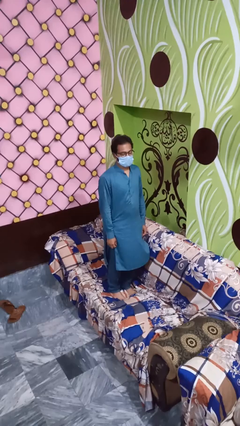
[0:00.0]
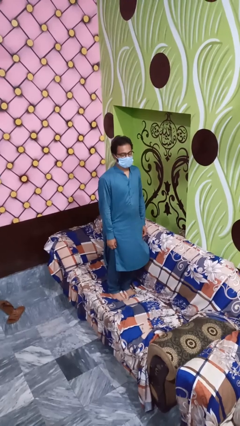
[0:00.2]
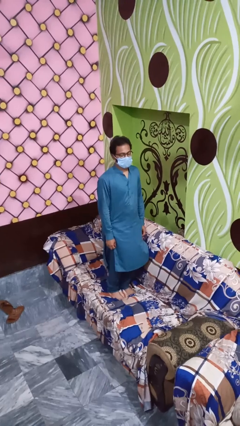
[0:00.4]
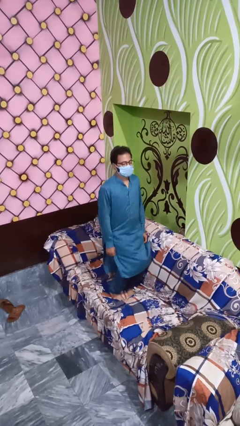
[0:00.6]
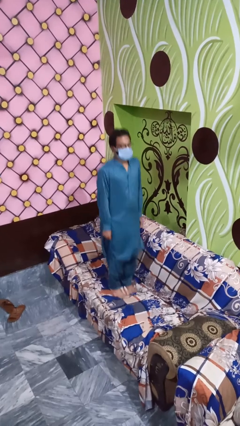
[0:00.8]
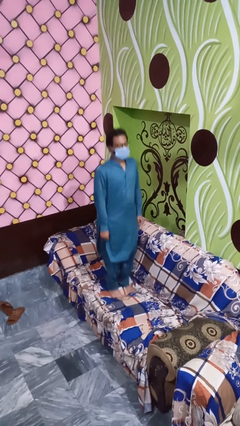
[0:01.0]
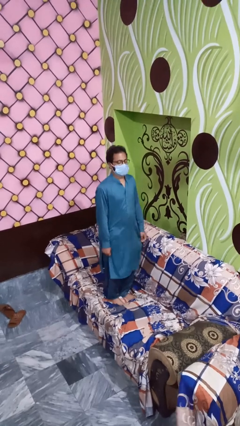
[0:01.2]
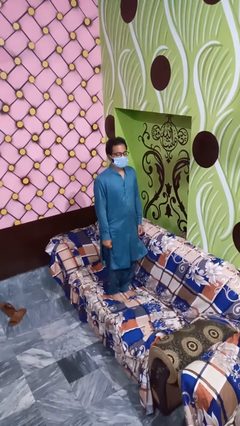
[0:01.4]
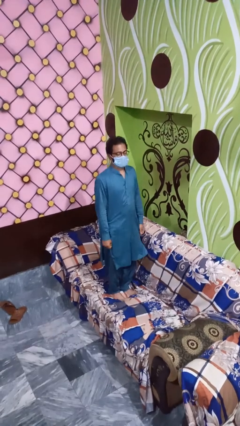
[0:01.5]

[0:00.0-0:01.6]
person jumps on couch

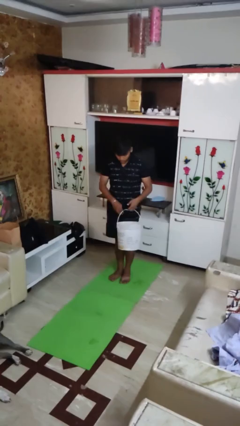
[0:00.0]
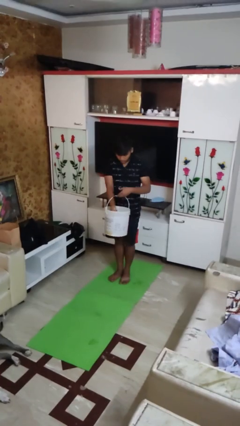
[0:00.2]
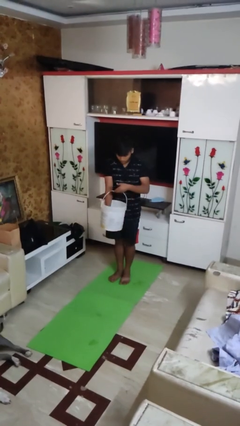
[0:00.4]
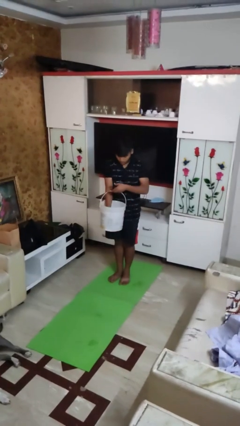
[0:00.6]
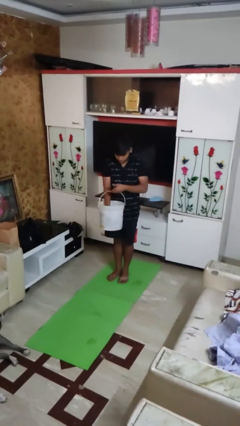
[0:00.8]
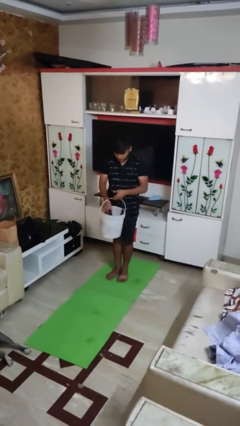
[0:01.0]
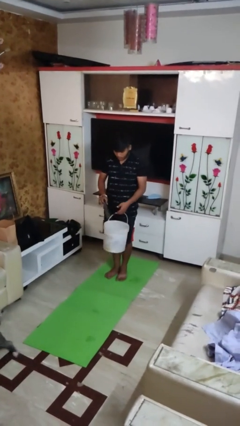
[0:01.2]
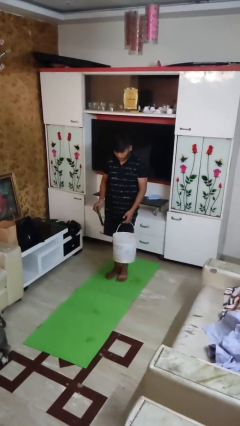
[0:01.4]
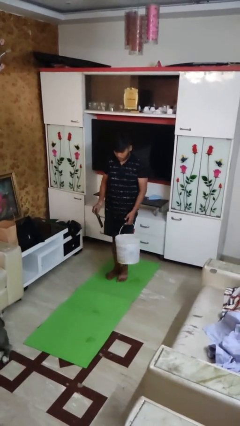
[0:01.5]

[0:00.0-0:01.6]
person takes object from basket

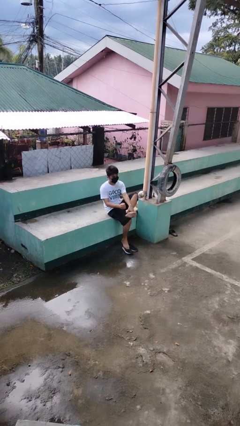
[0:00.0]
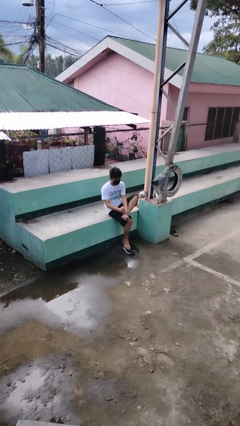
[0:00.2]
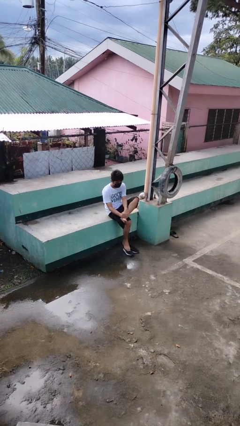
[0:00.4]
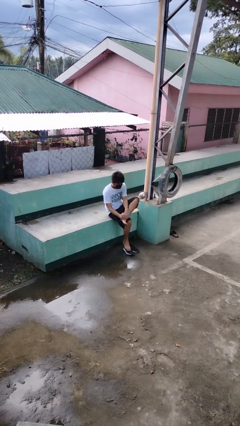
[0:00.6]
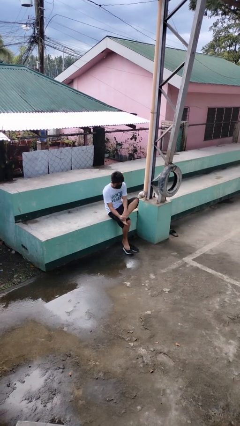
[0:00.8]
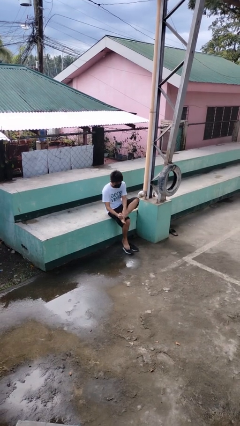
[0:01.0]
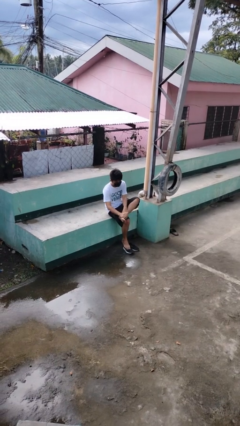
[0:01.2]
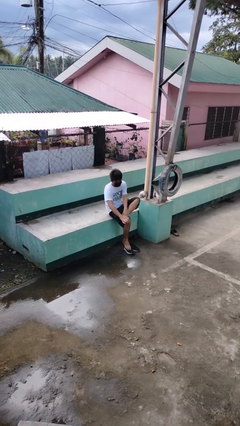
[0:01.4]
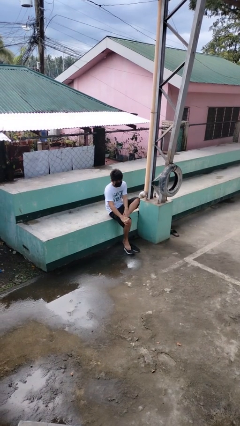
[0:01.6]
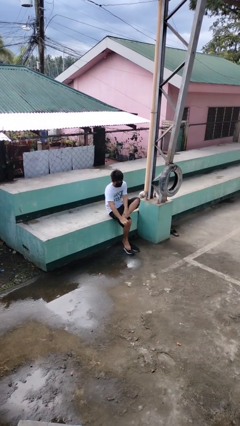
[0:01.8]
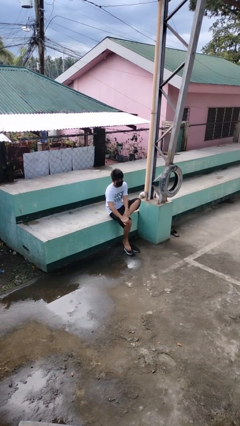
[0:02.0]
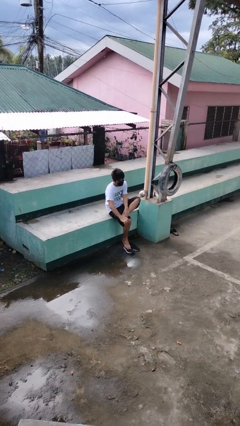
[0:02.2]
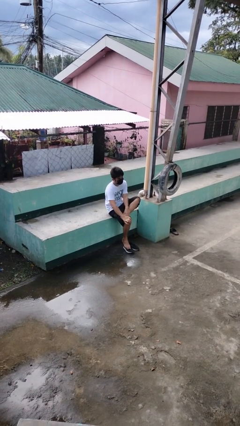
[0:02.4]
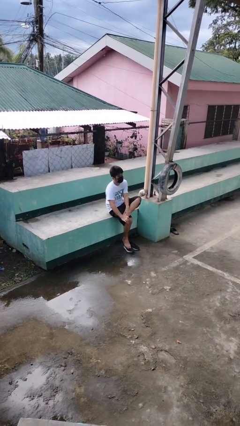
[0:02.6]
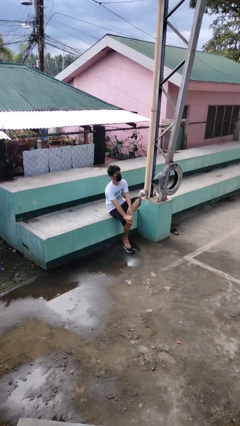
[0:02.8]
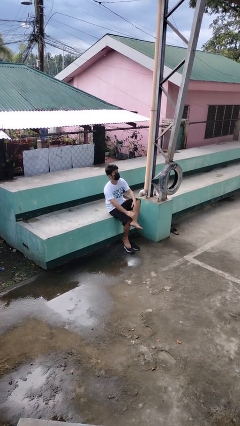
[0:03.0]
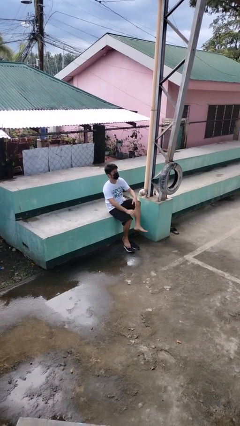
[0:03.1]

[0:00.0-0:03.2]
person rubs foot

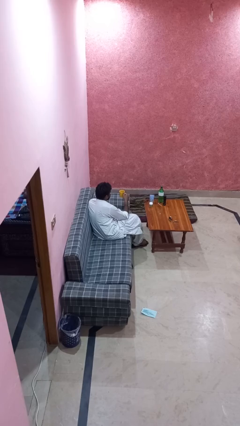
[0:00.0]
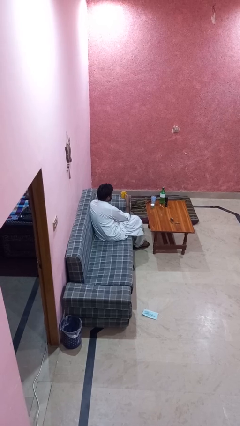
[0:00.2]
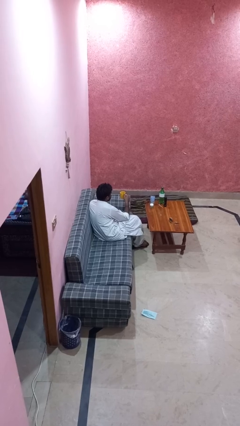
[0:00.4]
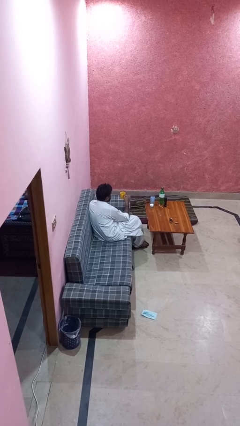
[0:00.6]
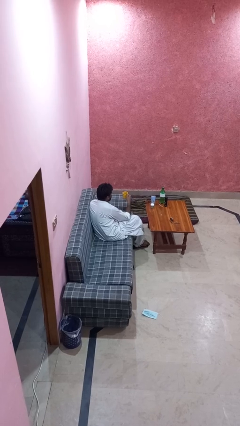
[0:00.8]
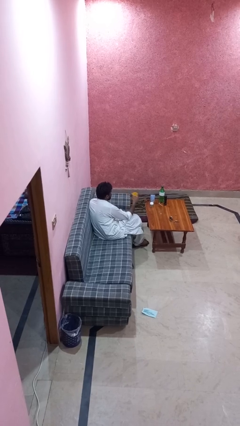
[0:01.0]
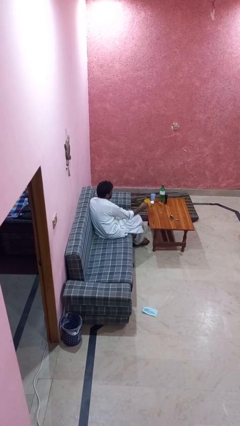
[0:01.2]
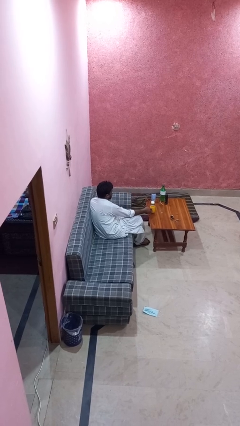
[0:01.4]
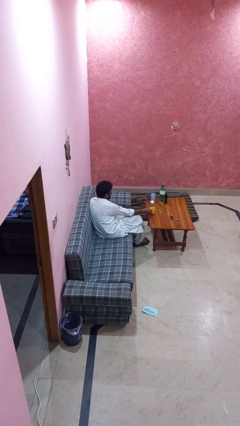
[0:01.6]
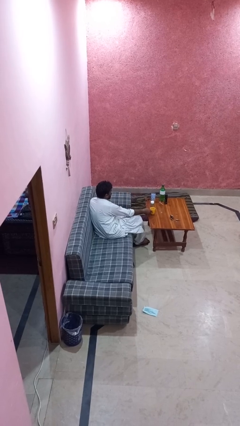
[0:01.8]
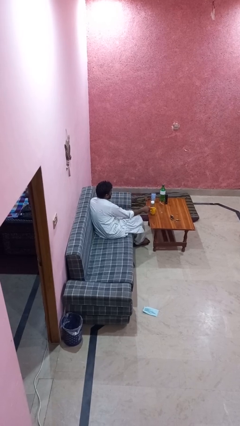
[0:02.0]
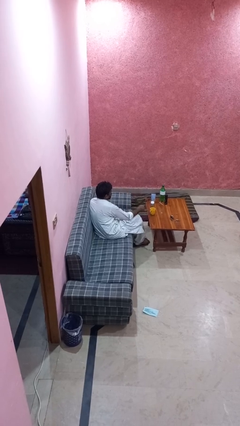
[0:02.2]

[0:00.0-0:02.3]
person puts down object on table

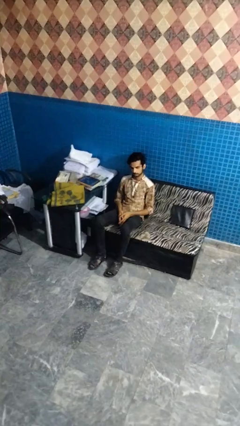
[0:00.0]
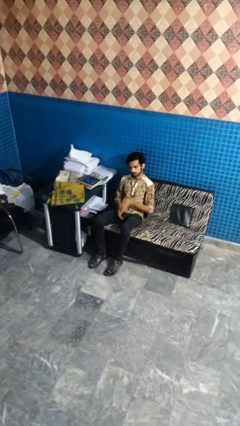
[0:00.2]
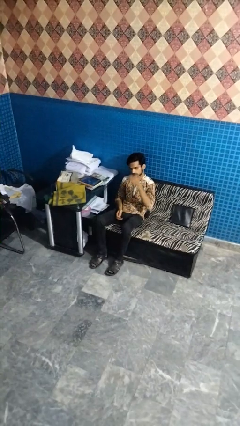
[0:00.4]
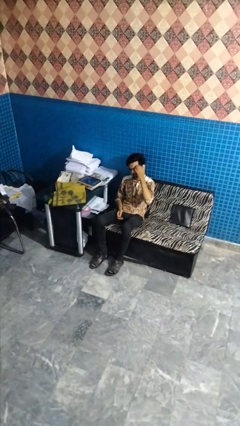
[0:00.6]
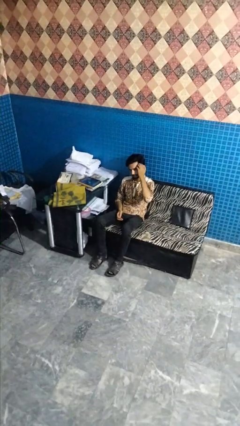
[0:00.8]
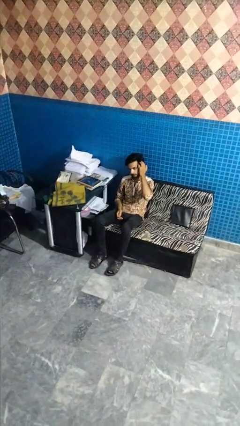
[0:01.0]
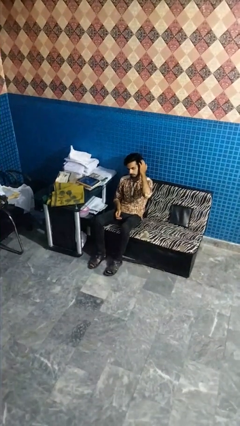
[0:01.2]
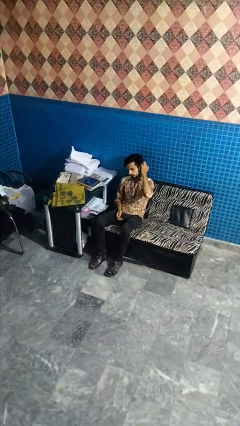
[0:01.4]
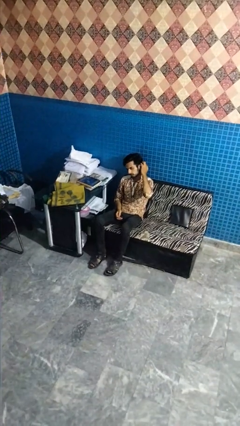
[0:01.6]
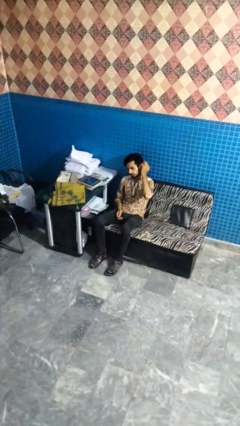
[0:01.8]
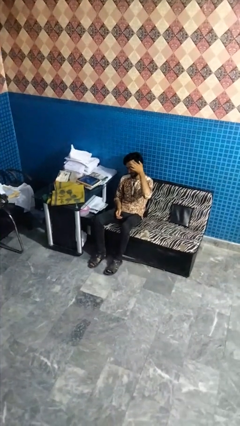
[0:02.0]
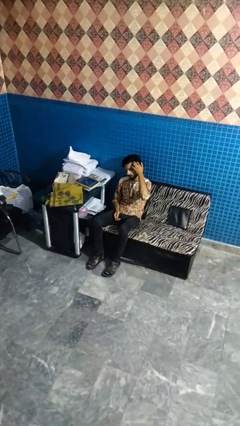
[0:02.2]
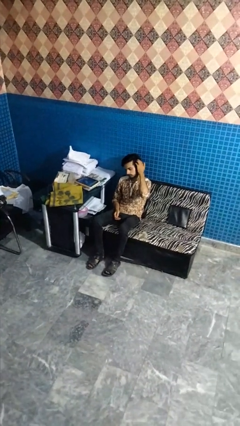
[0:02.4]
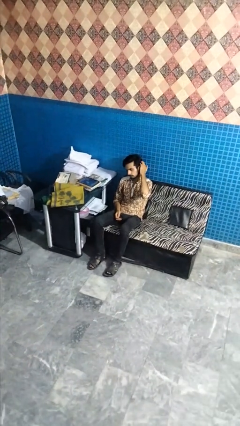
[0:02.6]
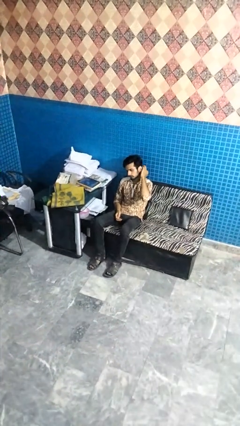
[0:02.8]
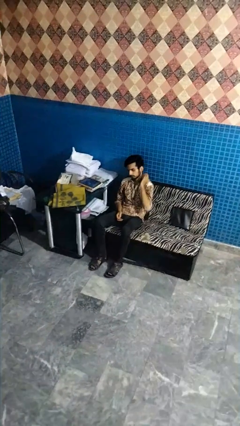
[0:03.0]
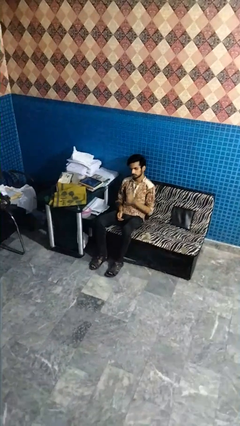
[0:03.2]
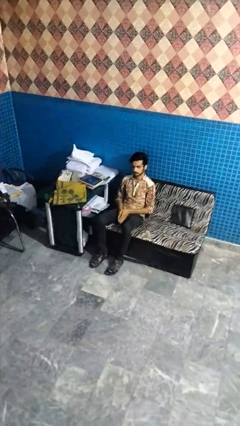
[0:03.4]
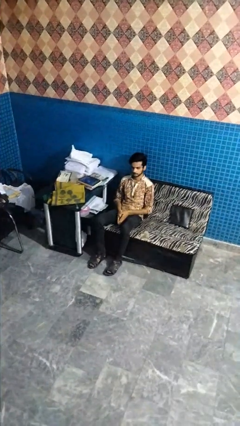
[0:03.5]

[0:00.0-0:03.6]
person strokes hair

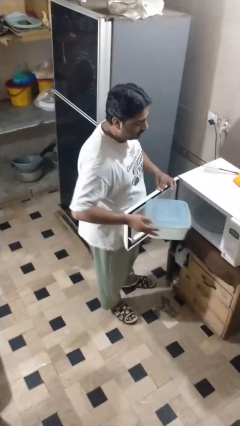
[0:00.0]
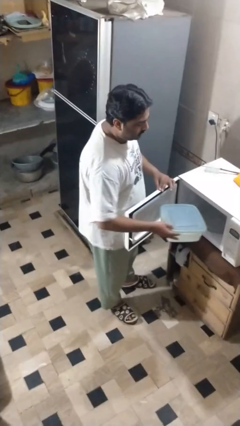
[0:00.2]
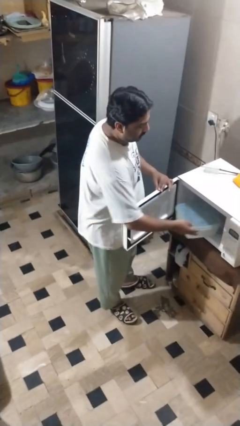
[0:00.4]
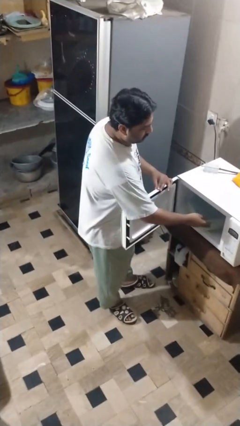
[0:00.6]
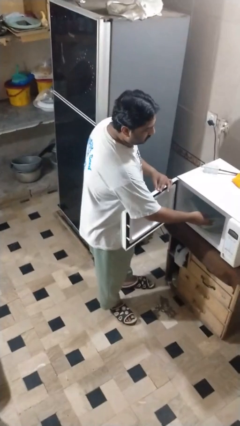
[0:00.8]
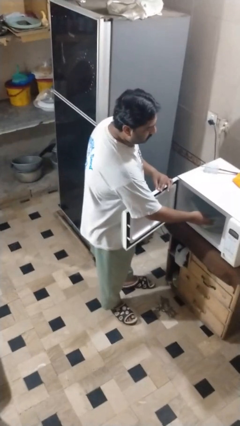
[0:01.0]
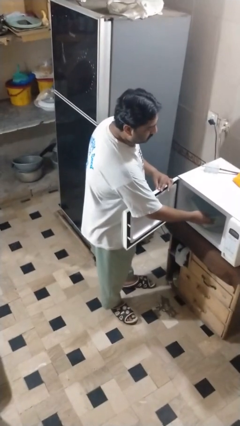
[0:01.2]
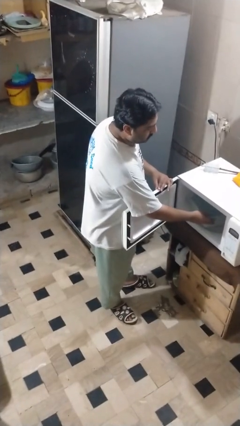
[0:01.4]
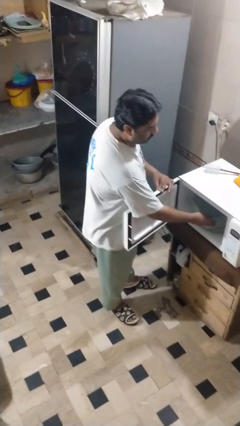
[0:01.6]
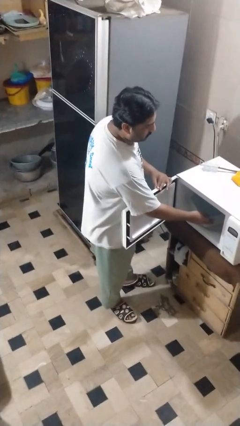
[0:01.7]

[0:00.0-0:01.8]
person opens microwave

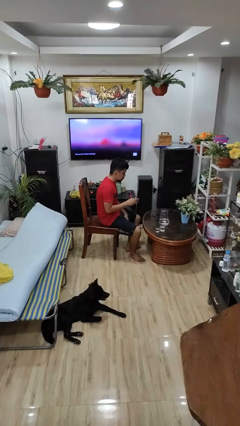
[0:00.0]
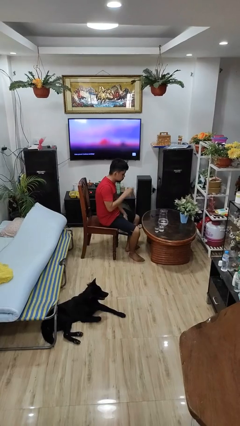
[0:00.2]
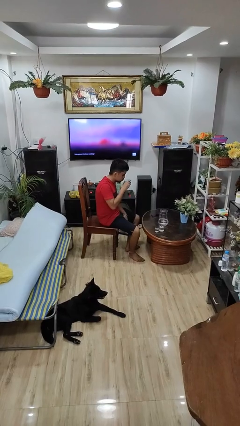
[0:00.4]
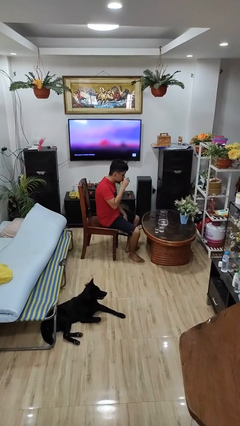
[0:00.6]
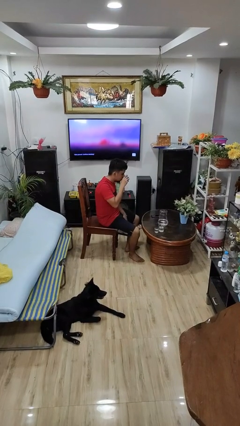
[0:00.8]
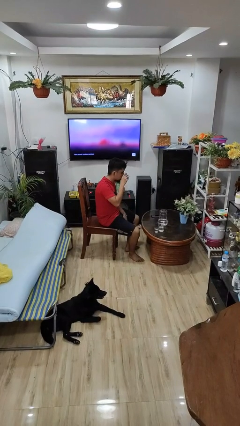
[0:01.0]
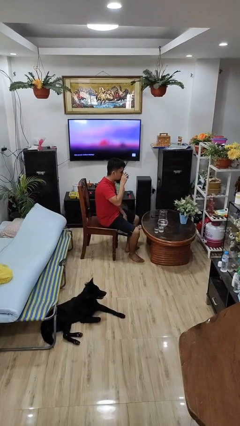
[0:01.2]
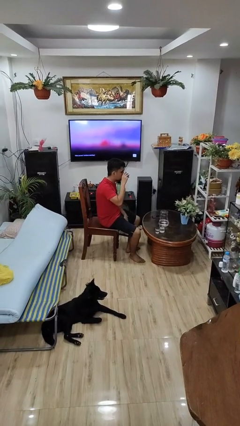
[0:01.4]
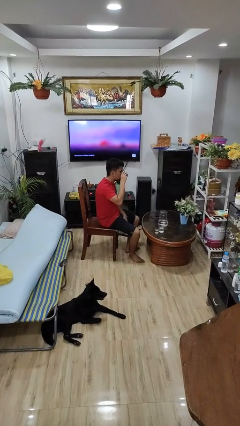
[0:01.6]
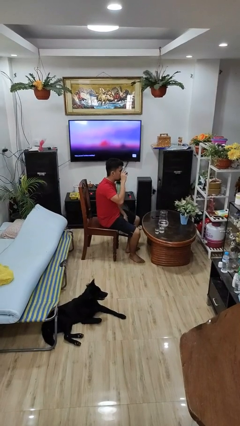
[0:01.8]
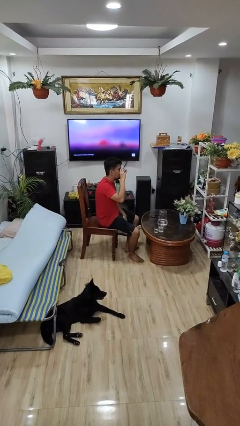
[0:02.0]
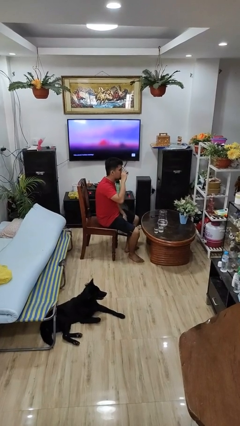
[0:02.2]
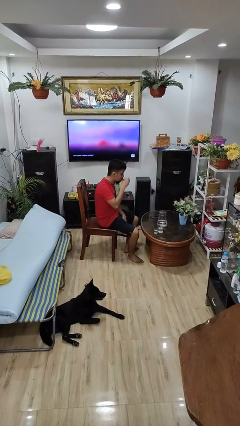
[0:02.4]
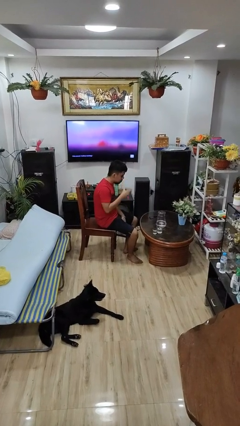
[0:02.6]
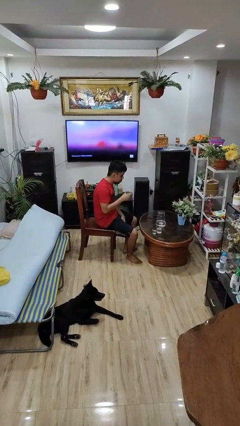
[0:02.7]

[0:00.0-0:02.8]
person drinks from shotglass
